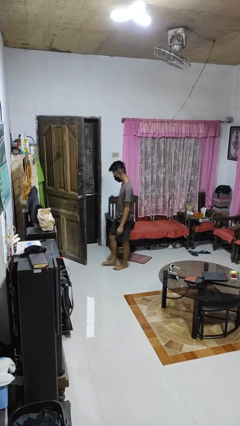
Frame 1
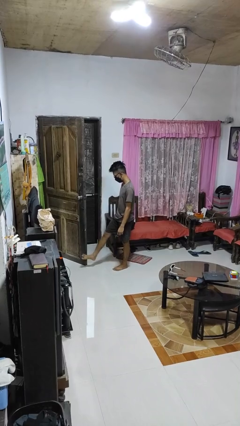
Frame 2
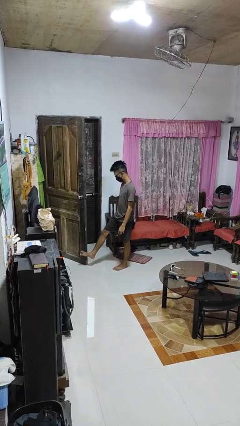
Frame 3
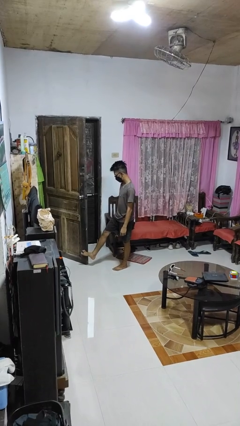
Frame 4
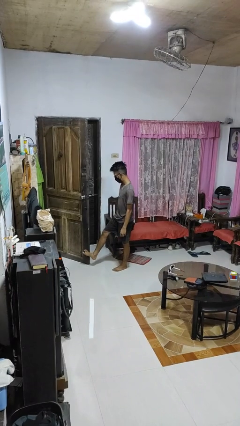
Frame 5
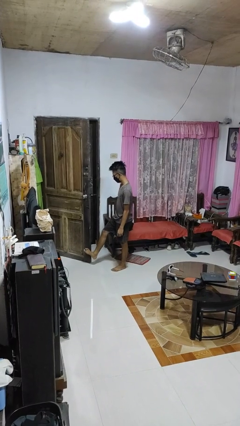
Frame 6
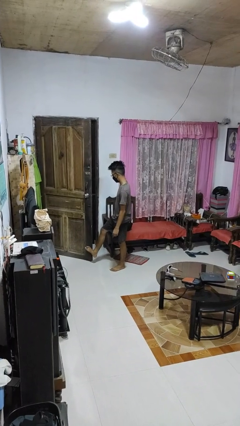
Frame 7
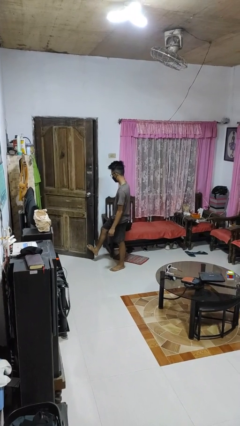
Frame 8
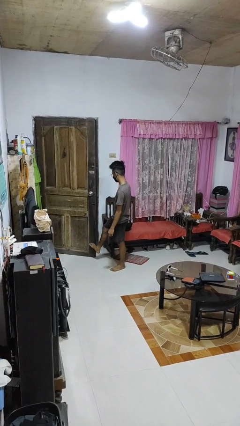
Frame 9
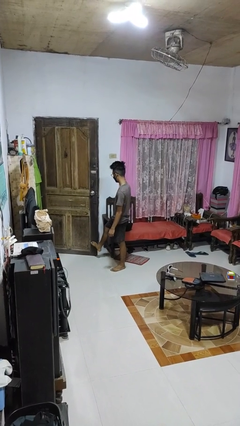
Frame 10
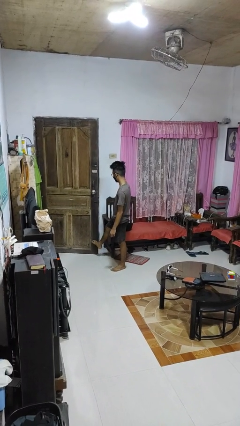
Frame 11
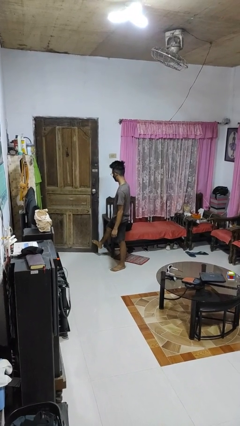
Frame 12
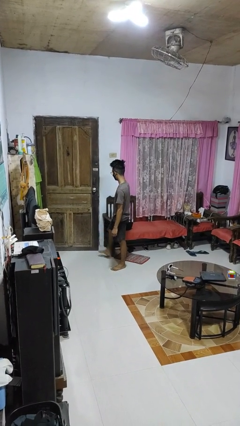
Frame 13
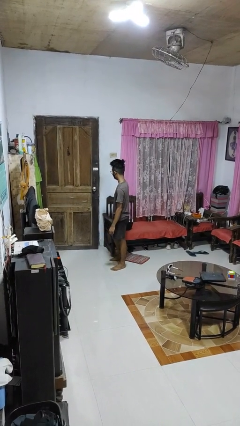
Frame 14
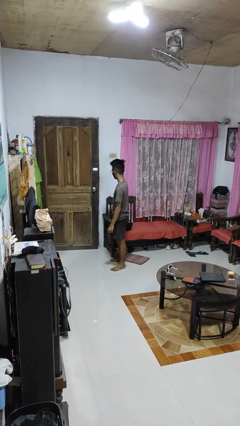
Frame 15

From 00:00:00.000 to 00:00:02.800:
person closes door with foot

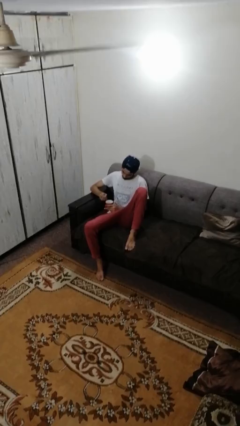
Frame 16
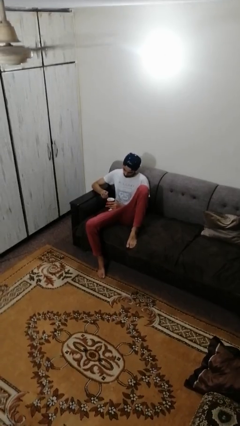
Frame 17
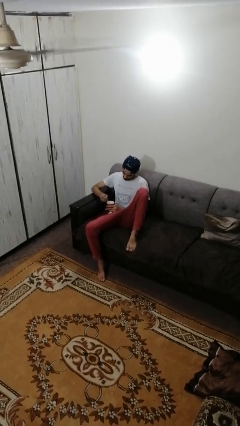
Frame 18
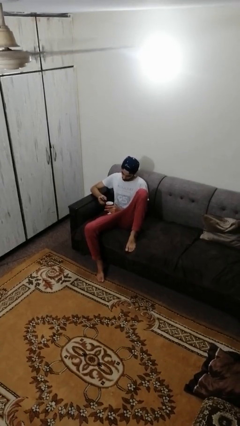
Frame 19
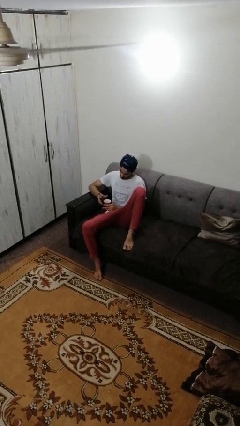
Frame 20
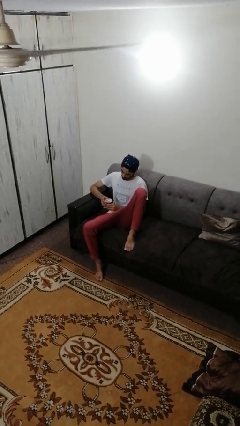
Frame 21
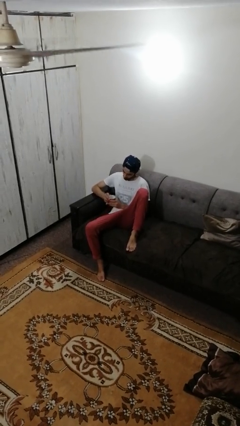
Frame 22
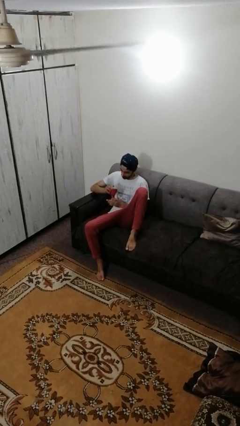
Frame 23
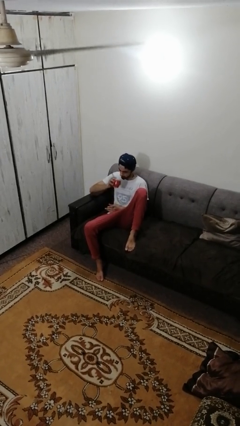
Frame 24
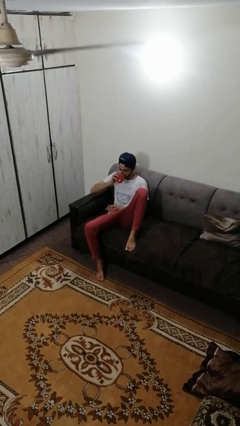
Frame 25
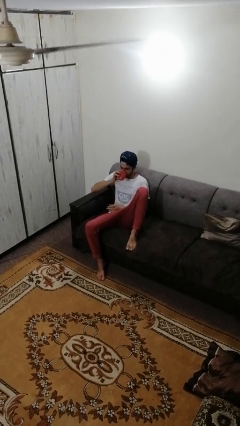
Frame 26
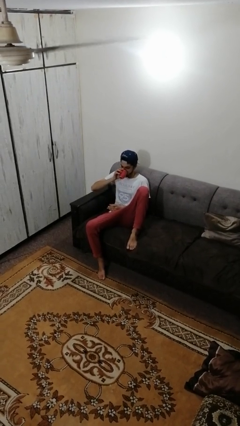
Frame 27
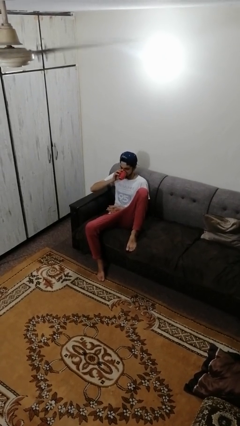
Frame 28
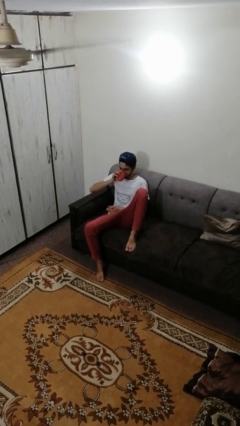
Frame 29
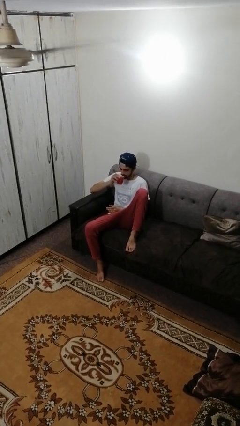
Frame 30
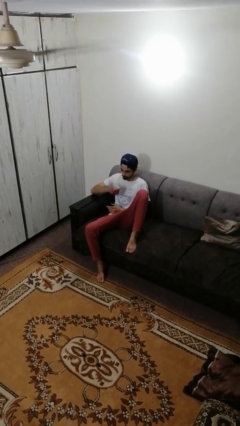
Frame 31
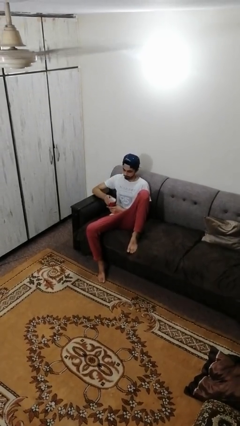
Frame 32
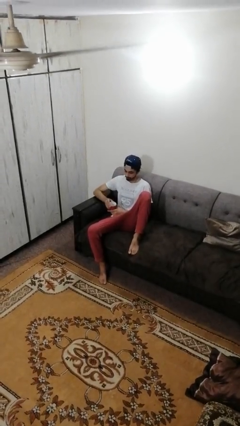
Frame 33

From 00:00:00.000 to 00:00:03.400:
person drinks from mug

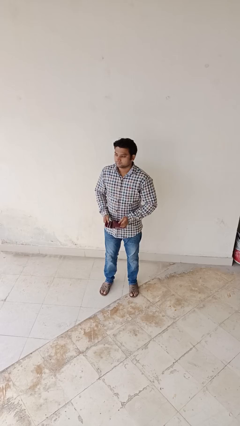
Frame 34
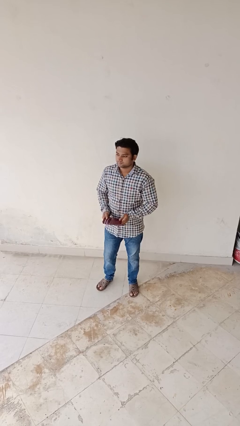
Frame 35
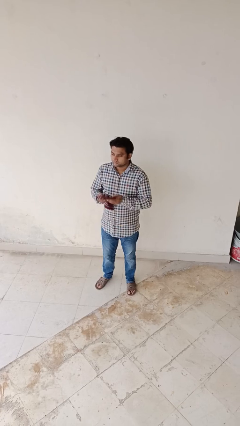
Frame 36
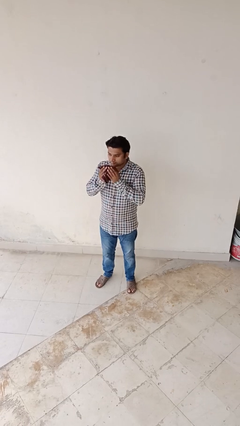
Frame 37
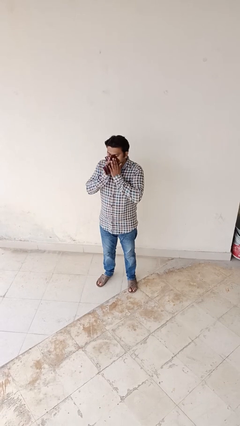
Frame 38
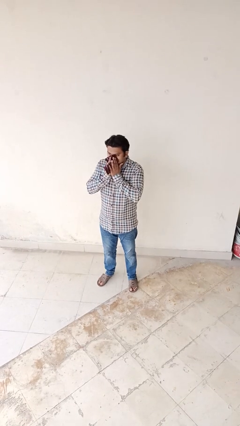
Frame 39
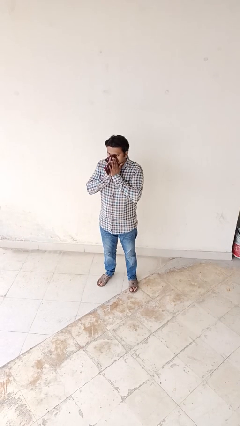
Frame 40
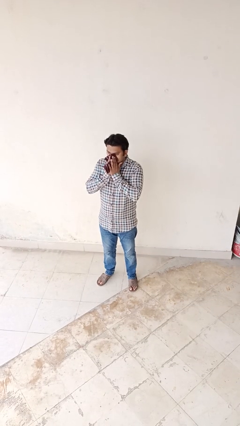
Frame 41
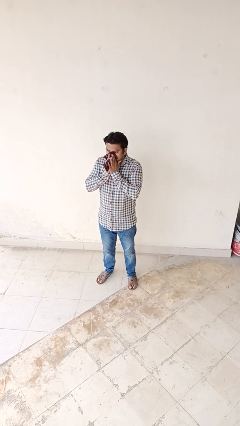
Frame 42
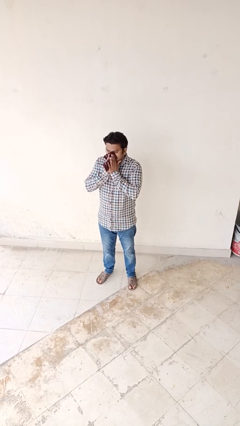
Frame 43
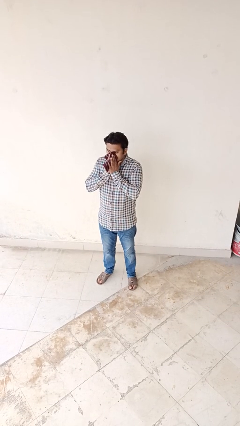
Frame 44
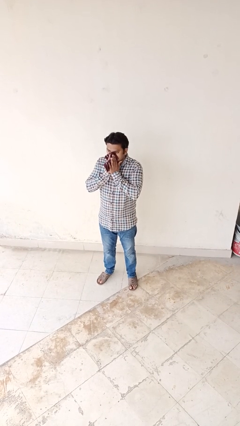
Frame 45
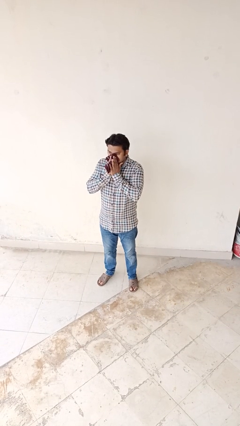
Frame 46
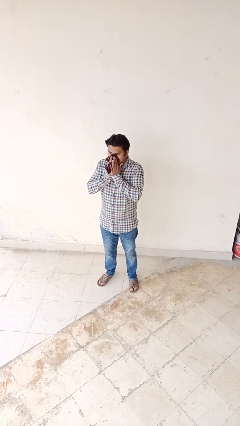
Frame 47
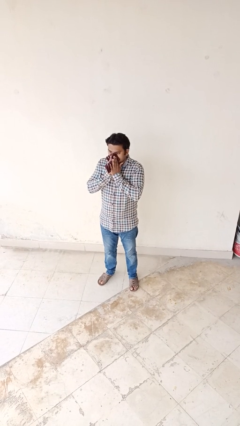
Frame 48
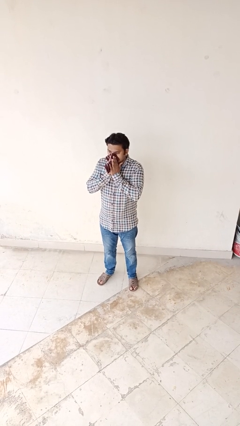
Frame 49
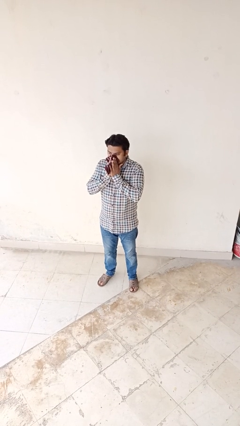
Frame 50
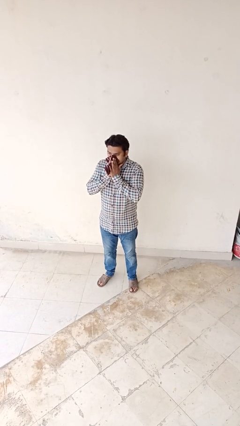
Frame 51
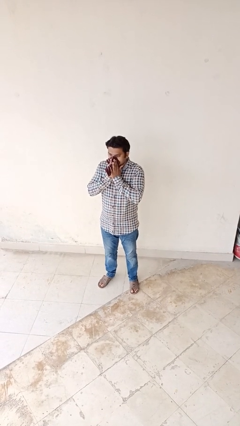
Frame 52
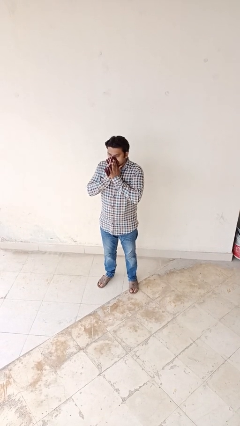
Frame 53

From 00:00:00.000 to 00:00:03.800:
person blows nose

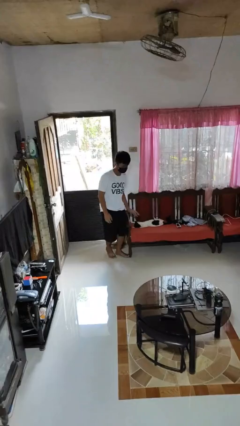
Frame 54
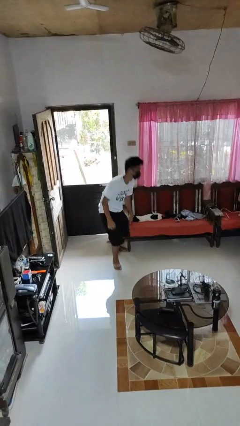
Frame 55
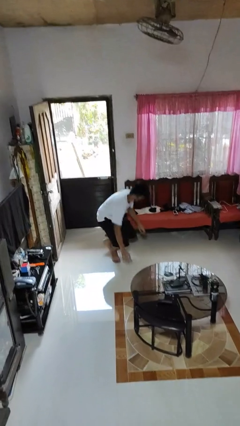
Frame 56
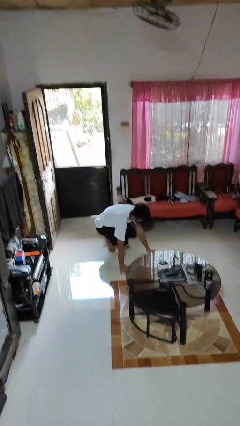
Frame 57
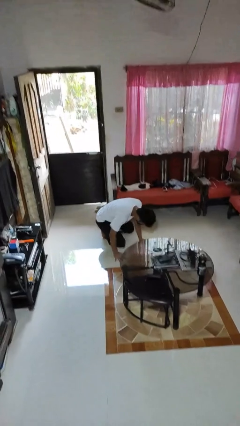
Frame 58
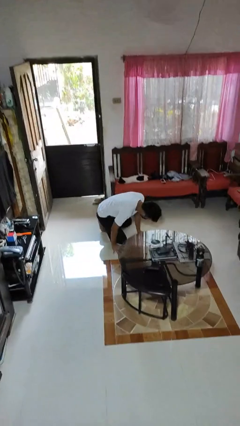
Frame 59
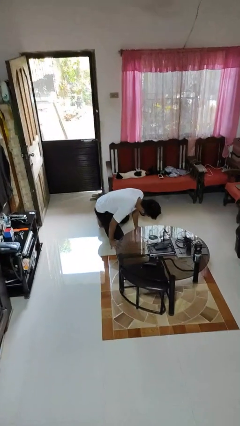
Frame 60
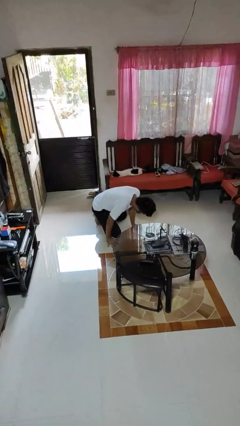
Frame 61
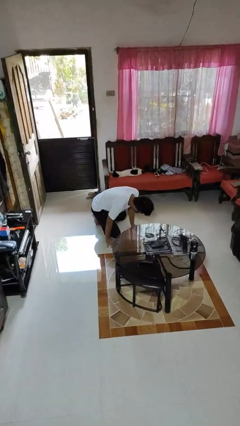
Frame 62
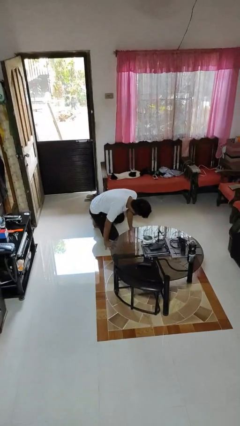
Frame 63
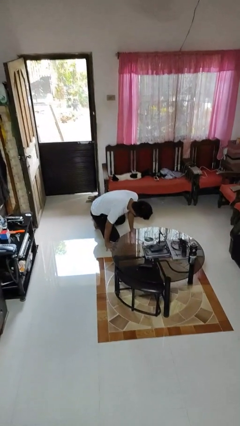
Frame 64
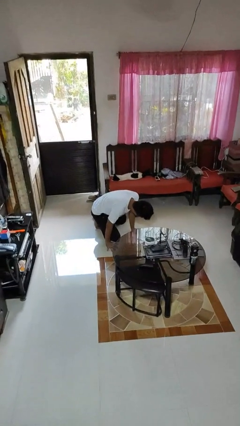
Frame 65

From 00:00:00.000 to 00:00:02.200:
person trips on object on floor

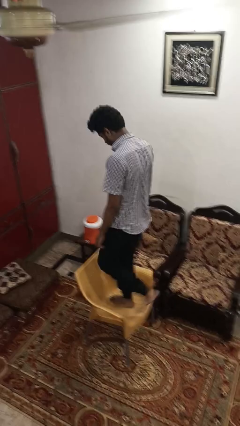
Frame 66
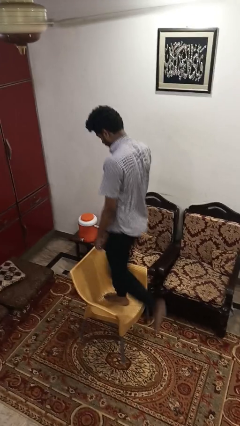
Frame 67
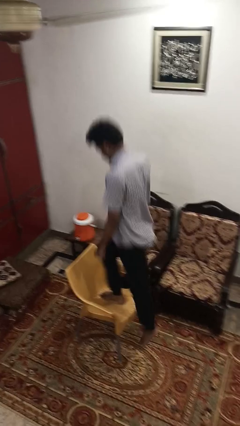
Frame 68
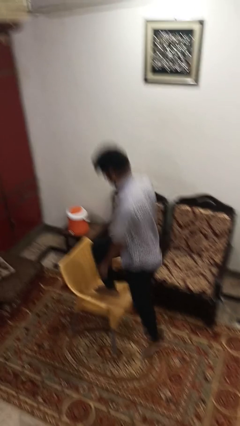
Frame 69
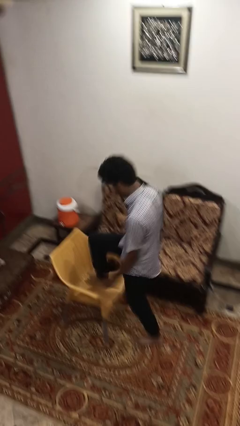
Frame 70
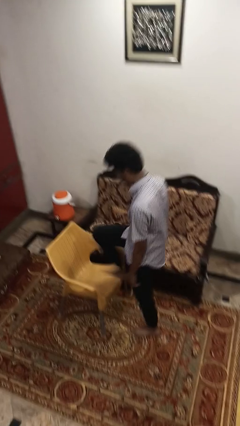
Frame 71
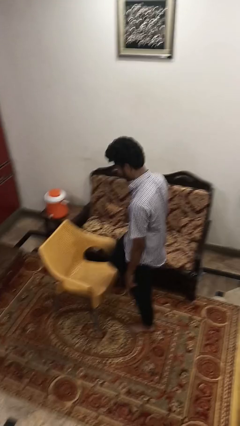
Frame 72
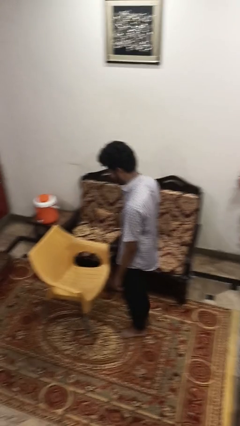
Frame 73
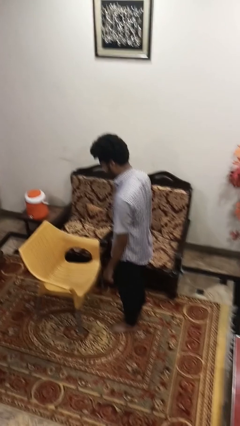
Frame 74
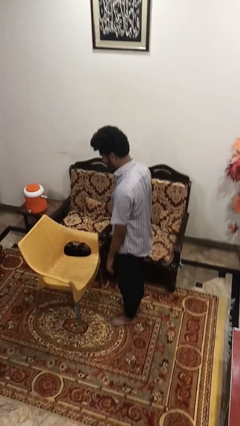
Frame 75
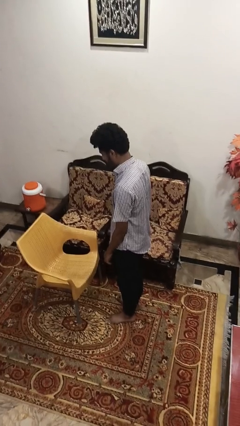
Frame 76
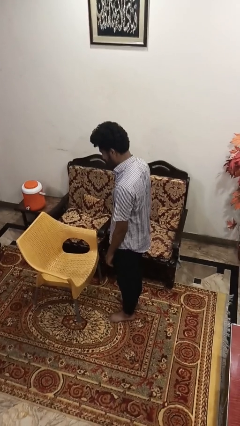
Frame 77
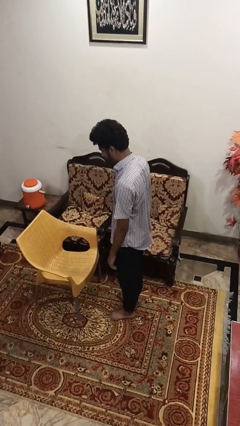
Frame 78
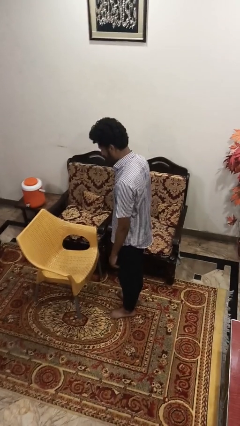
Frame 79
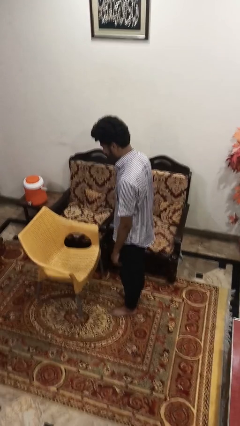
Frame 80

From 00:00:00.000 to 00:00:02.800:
person climbs off chair

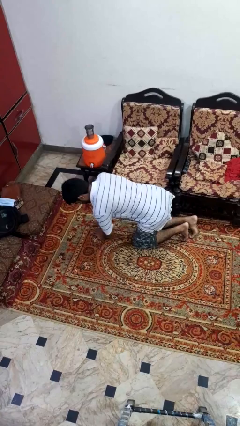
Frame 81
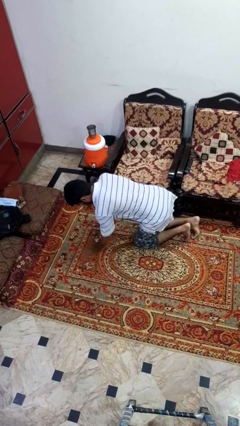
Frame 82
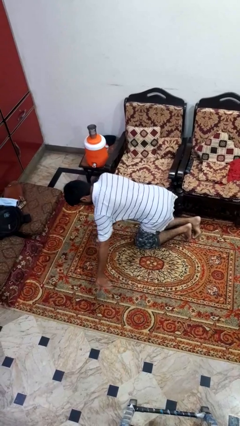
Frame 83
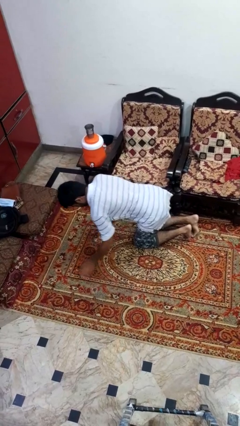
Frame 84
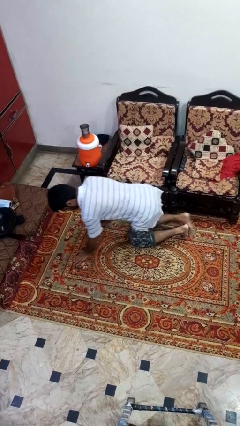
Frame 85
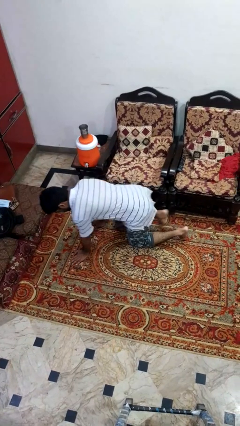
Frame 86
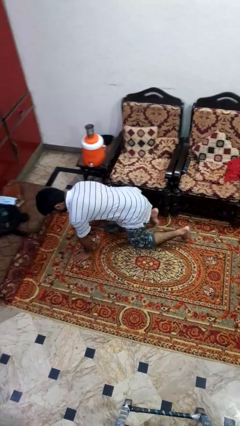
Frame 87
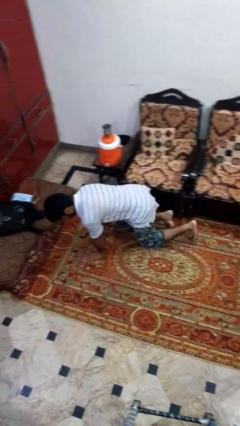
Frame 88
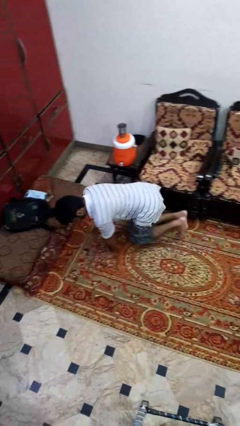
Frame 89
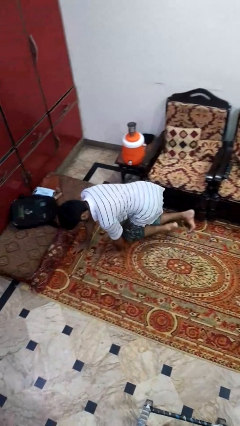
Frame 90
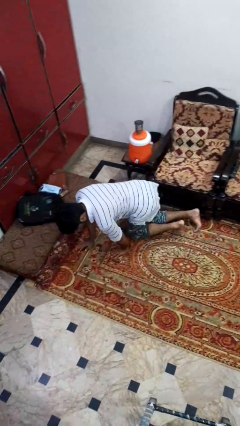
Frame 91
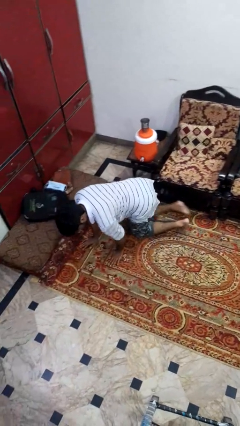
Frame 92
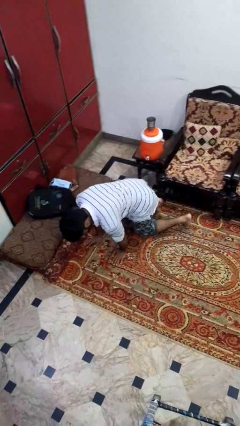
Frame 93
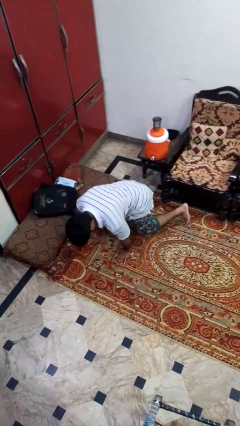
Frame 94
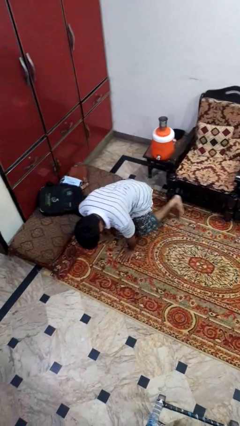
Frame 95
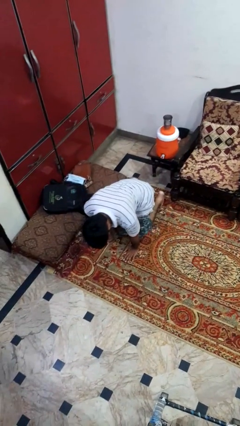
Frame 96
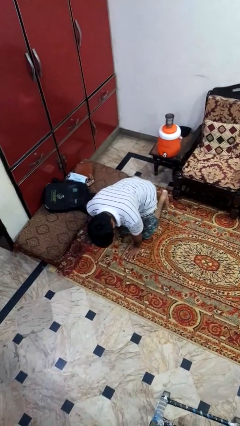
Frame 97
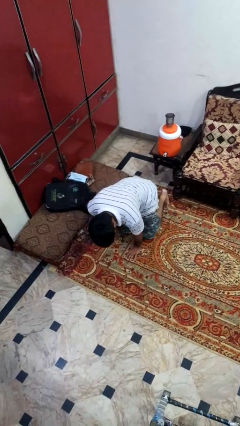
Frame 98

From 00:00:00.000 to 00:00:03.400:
person crawls
